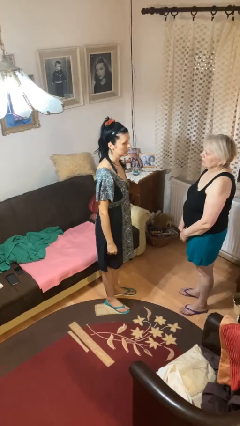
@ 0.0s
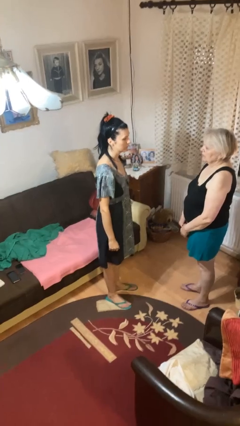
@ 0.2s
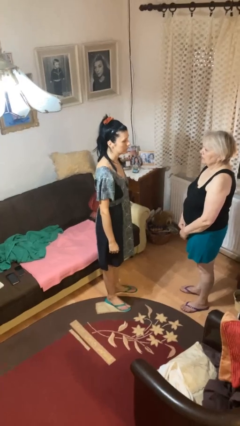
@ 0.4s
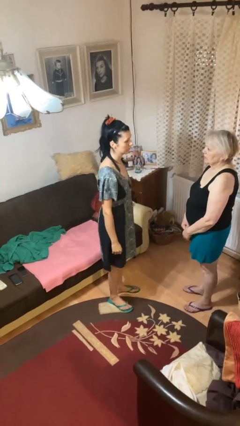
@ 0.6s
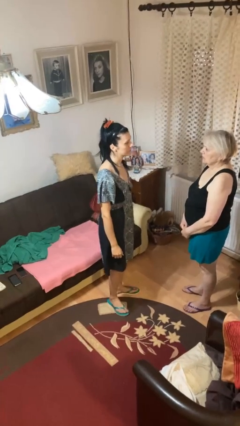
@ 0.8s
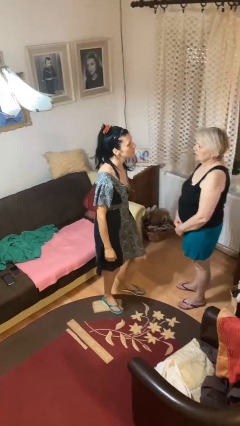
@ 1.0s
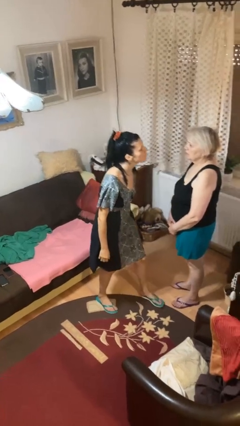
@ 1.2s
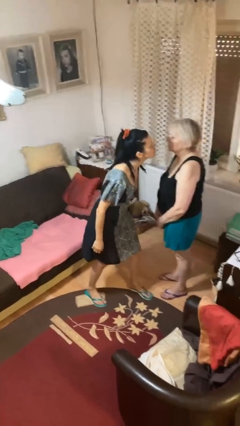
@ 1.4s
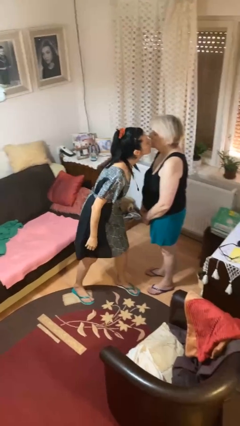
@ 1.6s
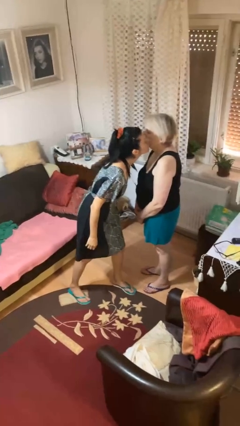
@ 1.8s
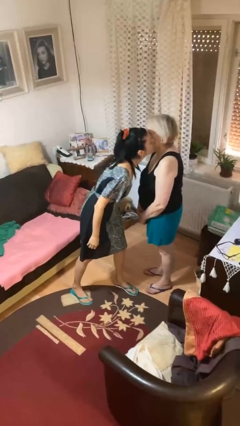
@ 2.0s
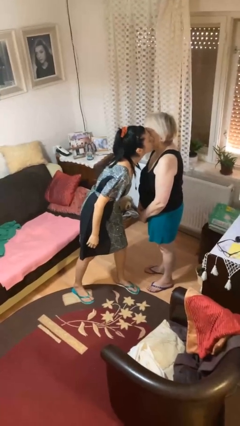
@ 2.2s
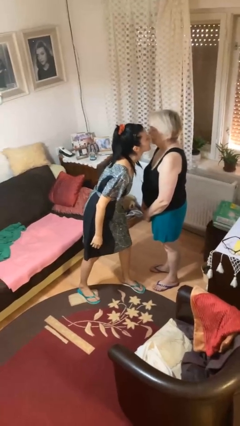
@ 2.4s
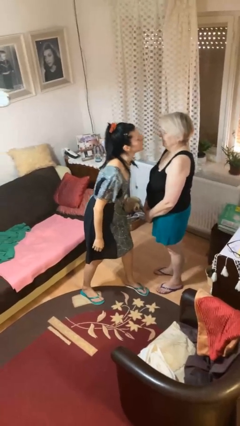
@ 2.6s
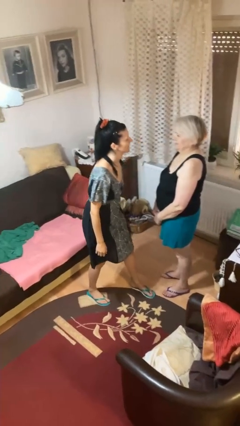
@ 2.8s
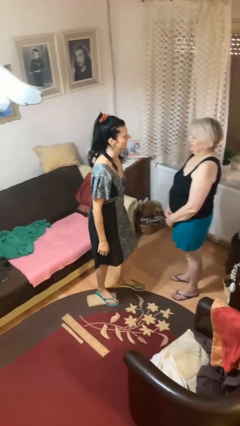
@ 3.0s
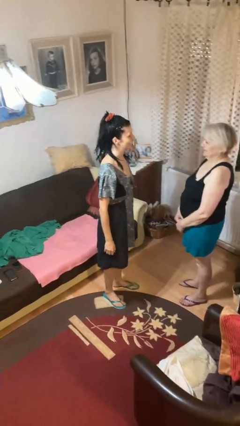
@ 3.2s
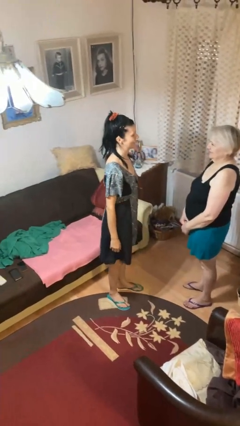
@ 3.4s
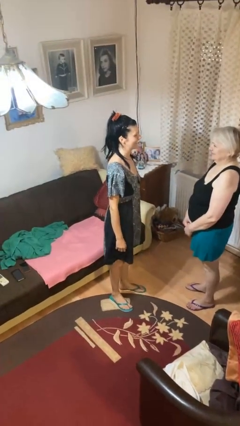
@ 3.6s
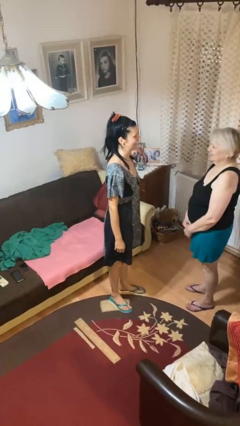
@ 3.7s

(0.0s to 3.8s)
person kisses cheek of person

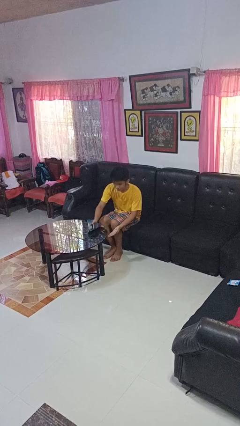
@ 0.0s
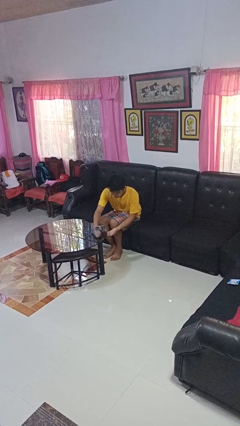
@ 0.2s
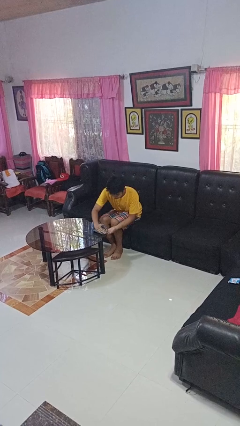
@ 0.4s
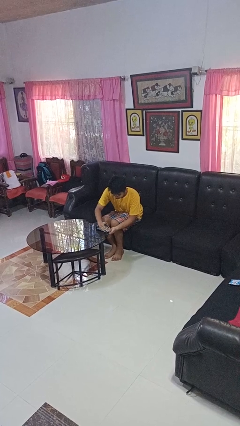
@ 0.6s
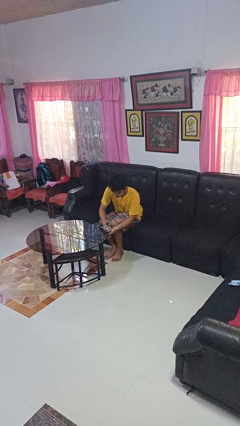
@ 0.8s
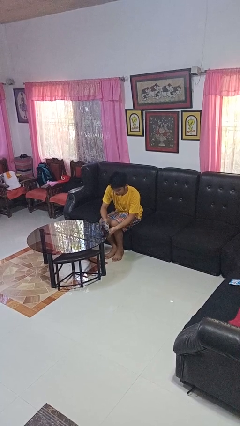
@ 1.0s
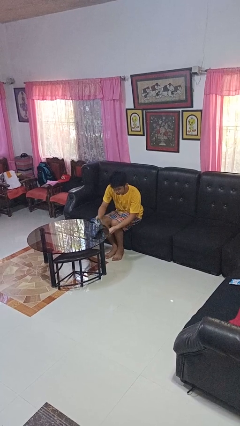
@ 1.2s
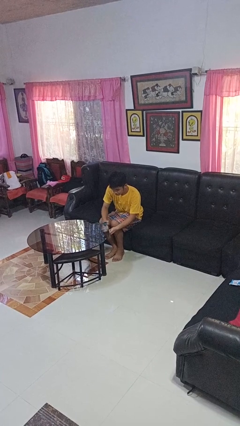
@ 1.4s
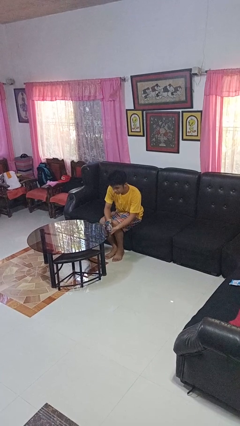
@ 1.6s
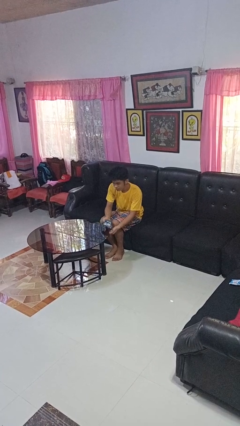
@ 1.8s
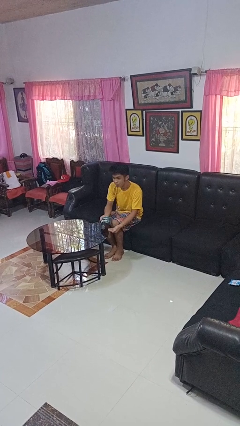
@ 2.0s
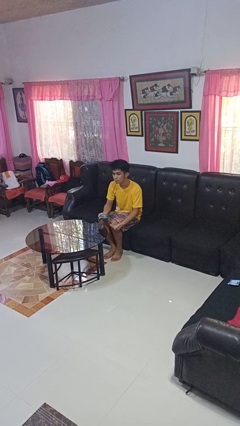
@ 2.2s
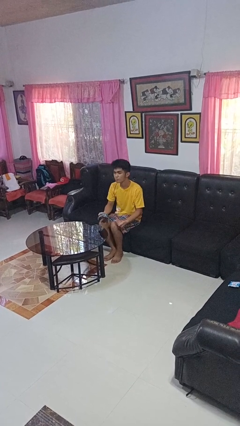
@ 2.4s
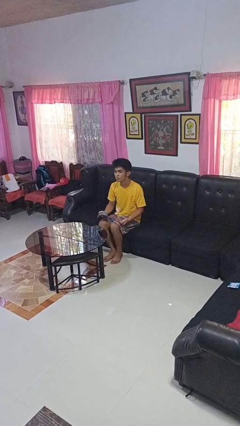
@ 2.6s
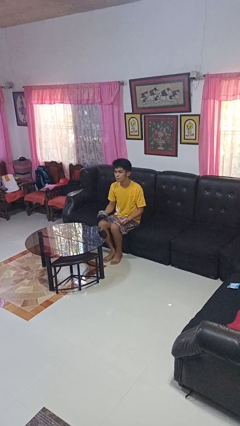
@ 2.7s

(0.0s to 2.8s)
person cleans table with rag

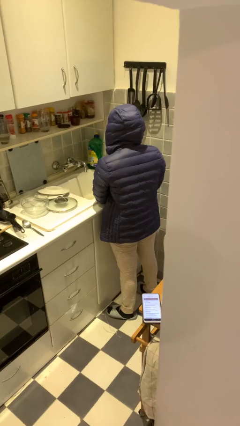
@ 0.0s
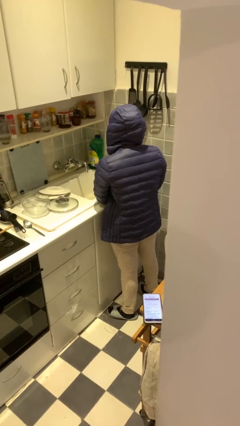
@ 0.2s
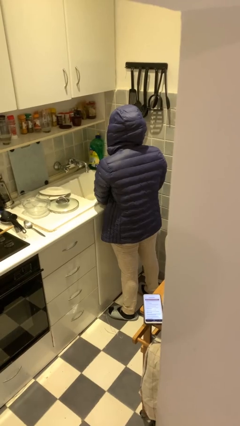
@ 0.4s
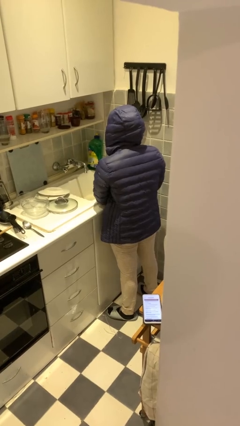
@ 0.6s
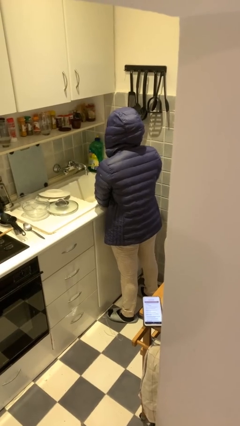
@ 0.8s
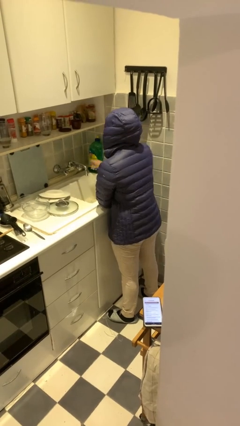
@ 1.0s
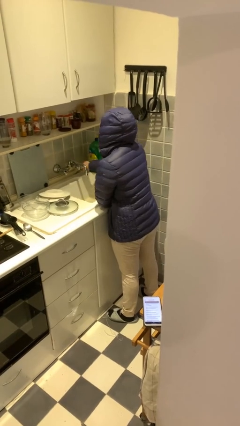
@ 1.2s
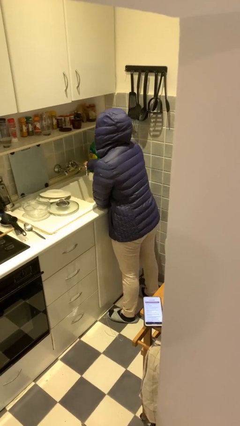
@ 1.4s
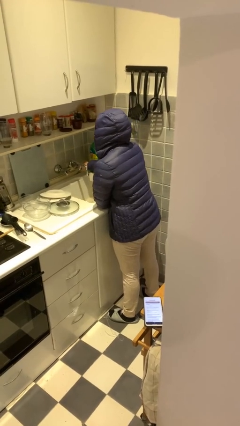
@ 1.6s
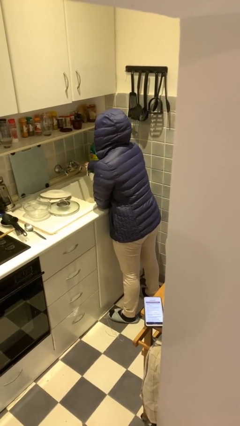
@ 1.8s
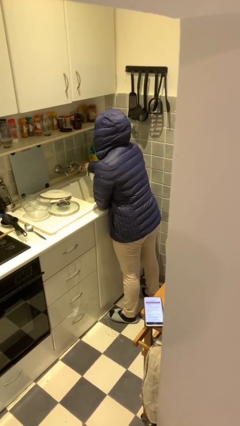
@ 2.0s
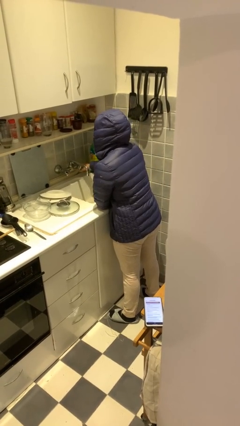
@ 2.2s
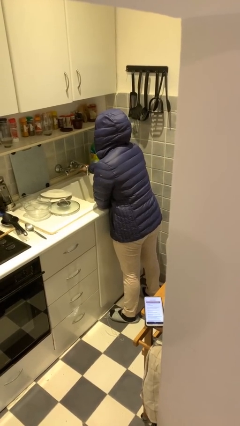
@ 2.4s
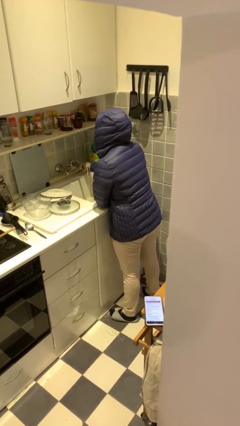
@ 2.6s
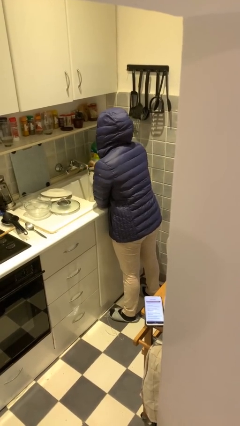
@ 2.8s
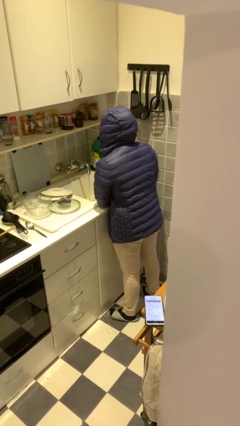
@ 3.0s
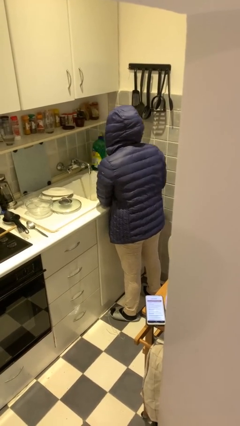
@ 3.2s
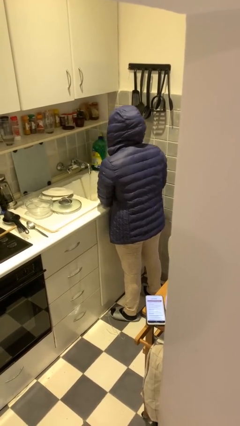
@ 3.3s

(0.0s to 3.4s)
person turns on faucet

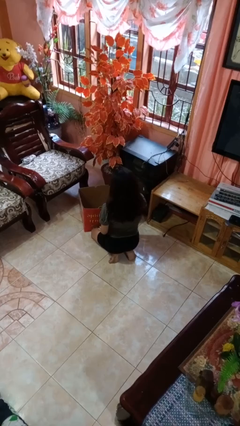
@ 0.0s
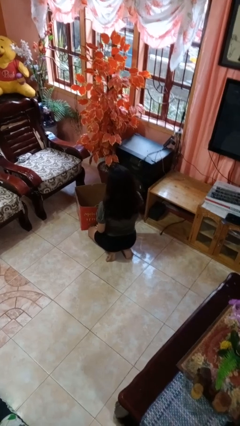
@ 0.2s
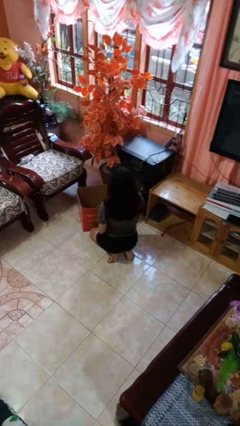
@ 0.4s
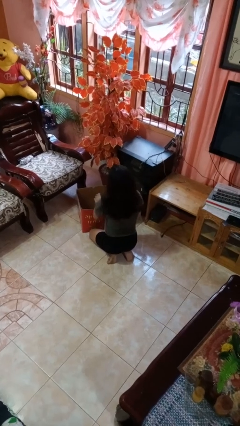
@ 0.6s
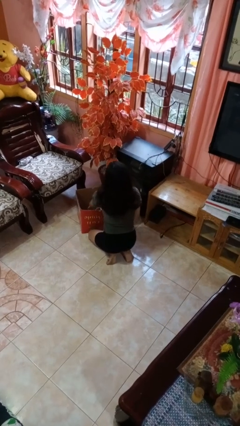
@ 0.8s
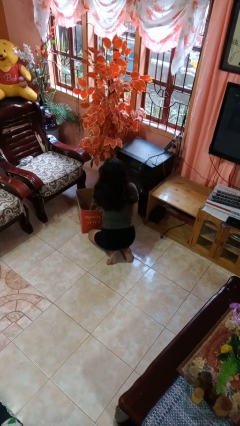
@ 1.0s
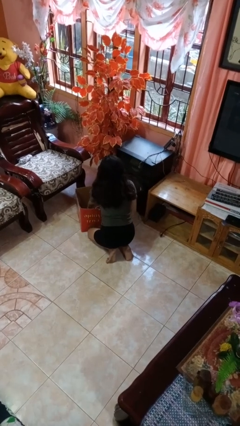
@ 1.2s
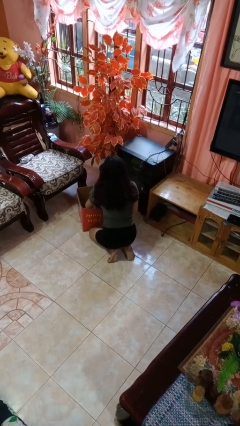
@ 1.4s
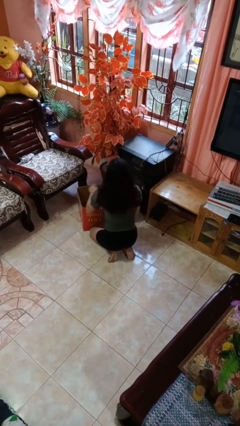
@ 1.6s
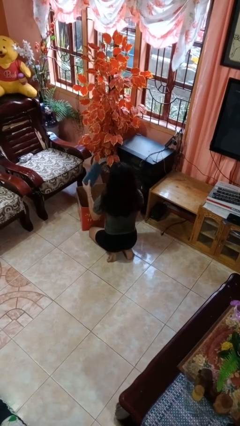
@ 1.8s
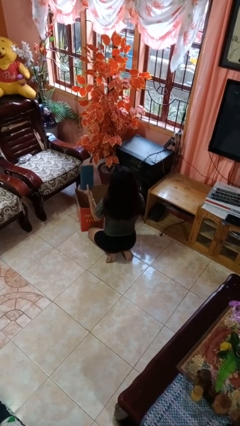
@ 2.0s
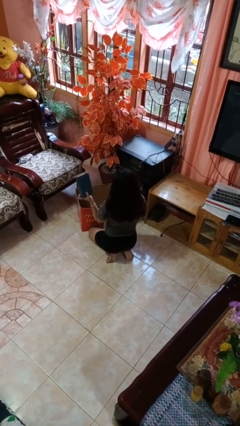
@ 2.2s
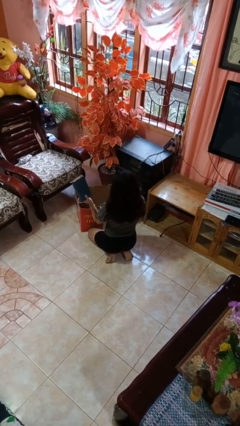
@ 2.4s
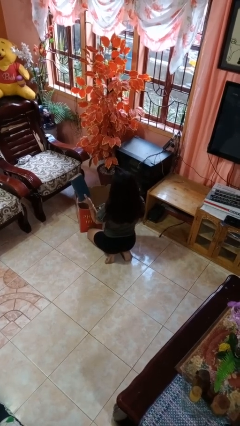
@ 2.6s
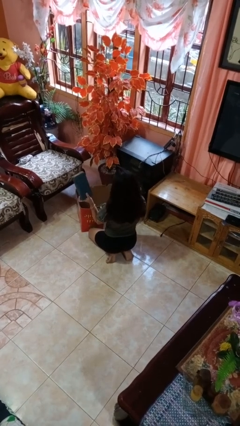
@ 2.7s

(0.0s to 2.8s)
person takes object from box

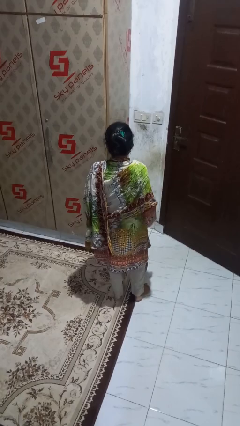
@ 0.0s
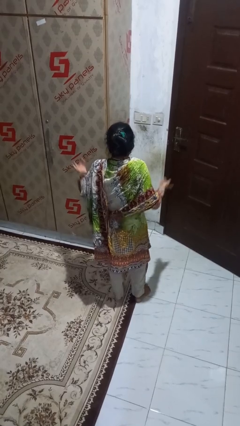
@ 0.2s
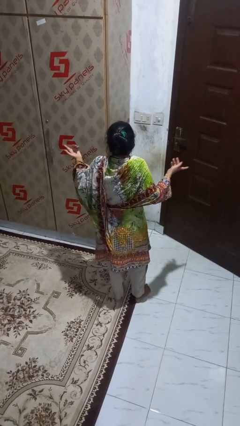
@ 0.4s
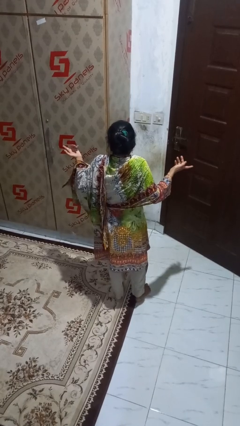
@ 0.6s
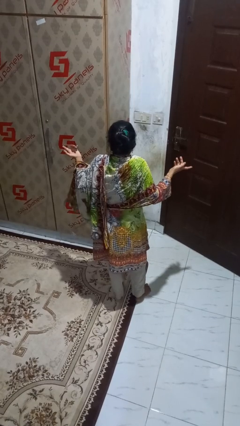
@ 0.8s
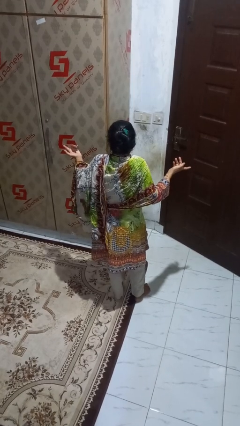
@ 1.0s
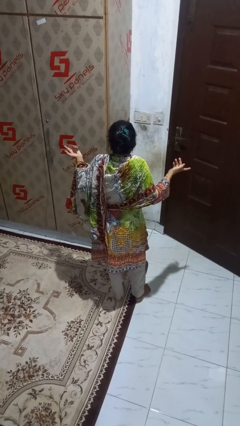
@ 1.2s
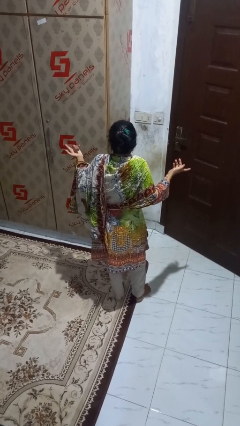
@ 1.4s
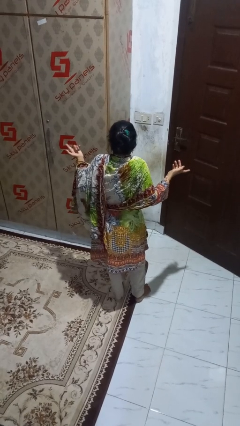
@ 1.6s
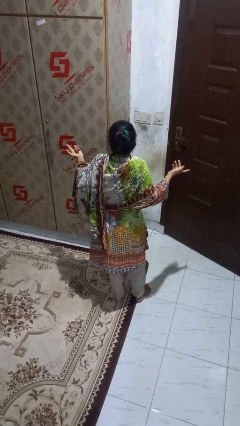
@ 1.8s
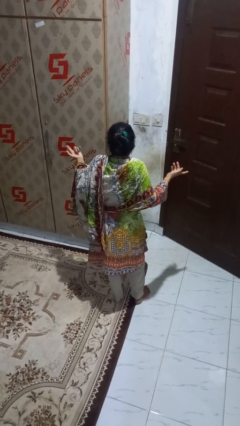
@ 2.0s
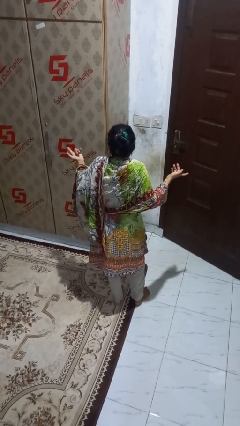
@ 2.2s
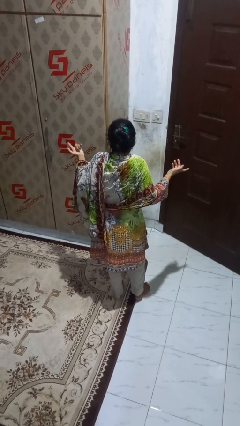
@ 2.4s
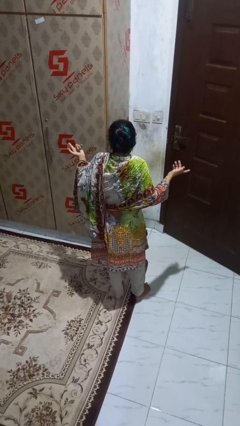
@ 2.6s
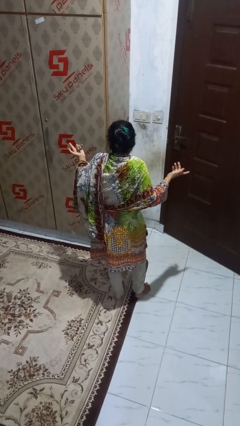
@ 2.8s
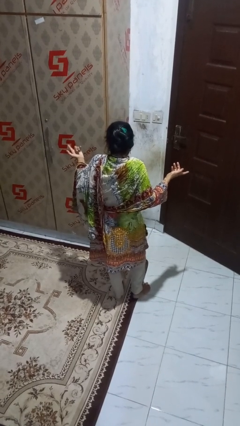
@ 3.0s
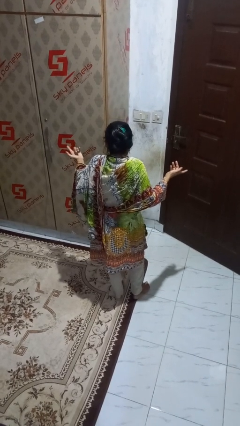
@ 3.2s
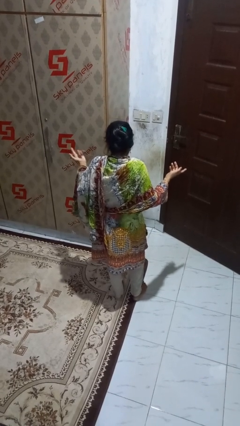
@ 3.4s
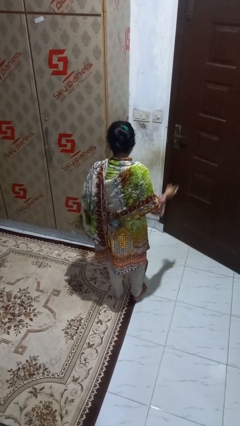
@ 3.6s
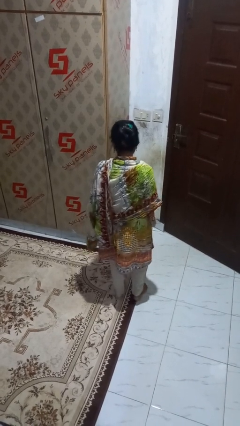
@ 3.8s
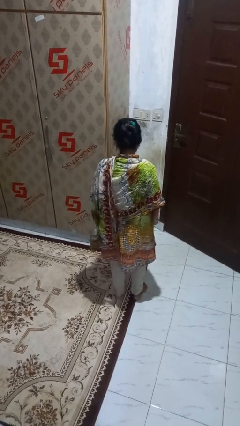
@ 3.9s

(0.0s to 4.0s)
person shrugs

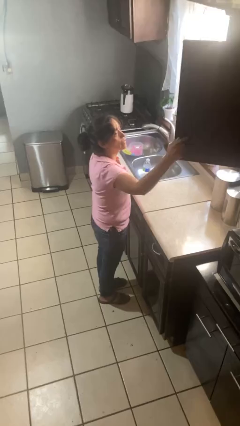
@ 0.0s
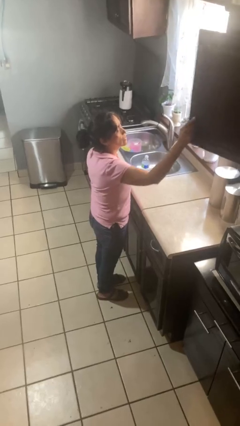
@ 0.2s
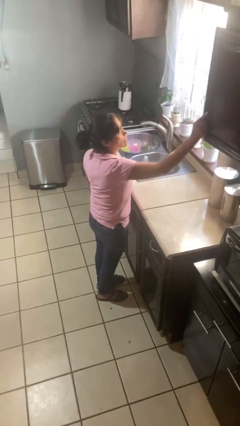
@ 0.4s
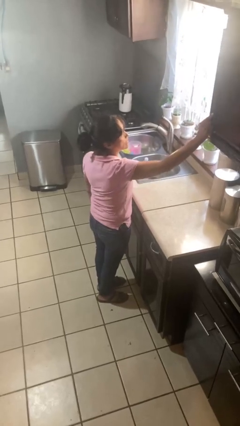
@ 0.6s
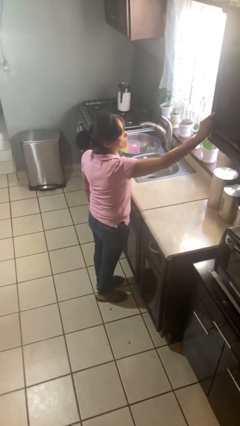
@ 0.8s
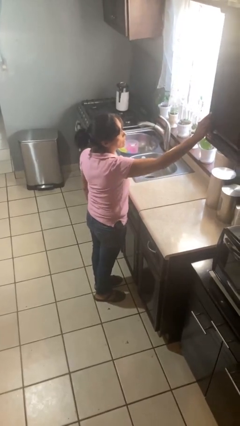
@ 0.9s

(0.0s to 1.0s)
person closes cabinet
